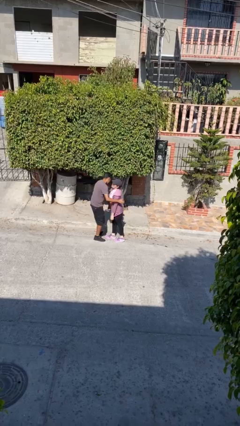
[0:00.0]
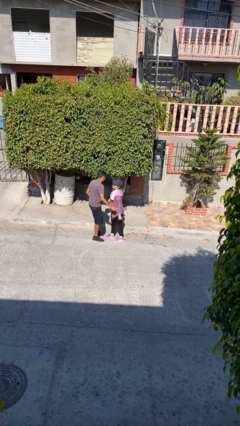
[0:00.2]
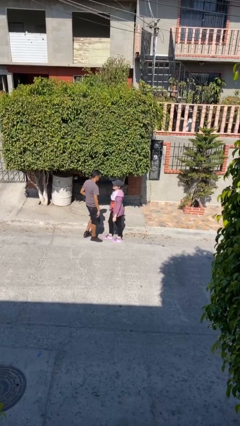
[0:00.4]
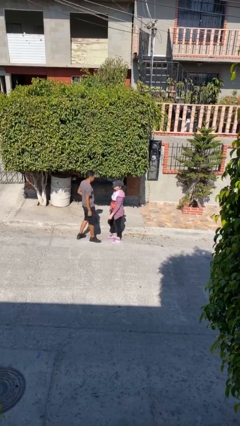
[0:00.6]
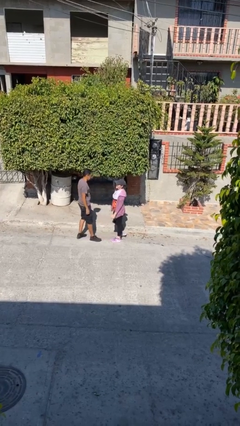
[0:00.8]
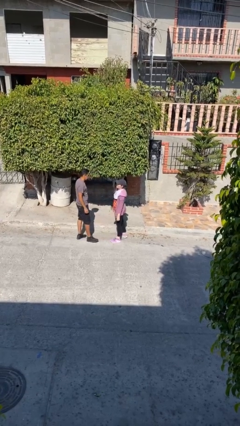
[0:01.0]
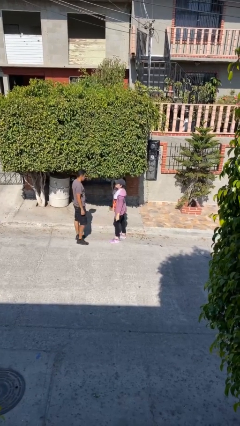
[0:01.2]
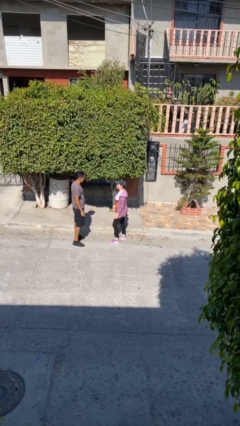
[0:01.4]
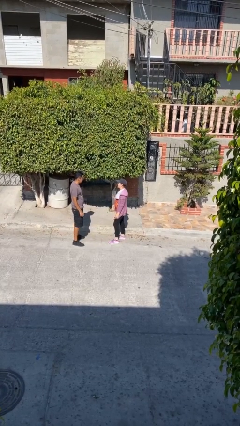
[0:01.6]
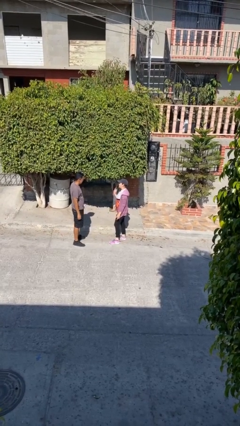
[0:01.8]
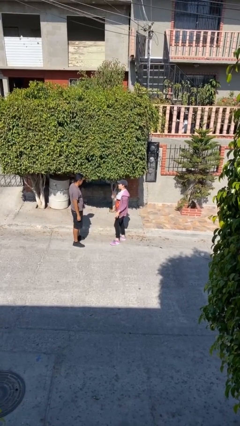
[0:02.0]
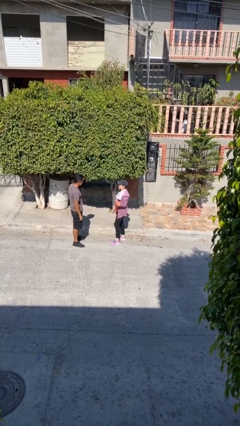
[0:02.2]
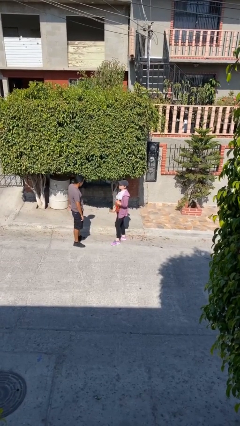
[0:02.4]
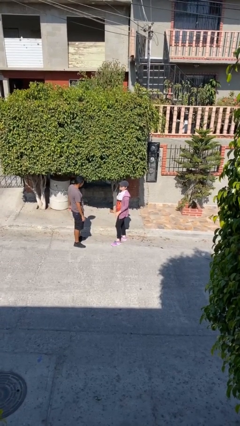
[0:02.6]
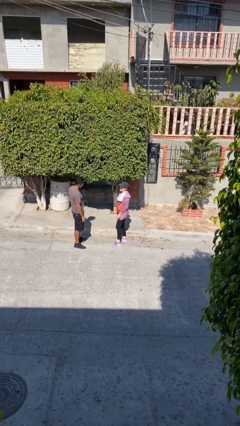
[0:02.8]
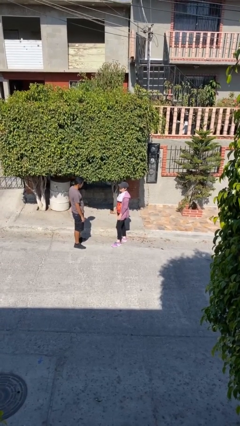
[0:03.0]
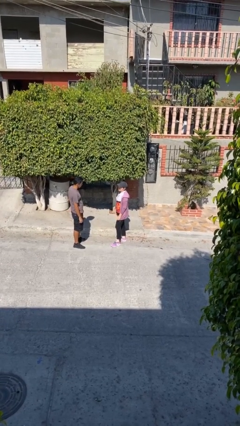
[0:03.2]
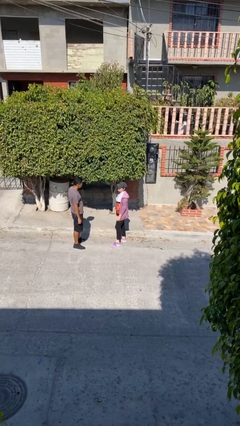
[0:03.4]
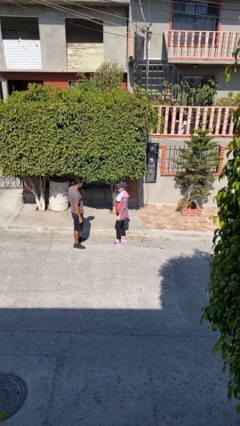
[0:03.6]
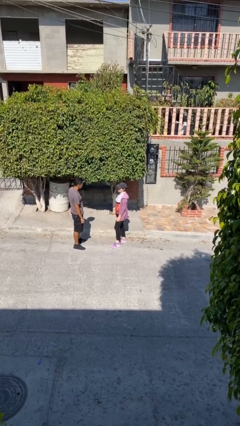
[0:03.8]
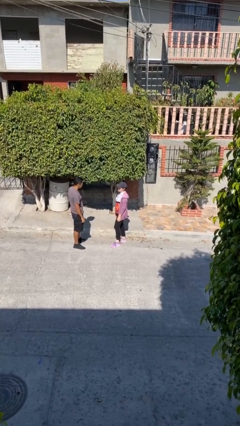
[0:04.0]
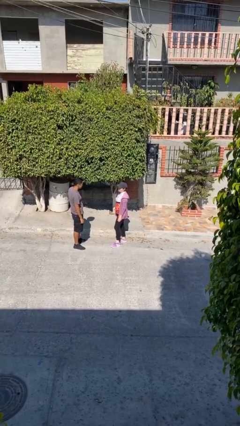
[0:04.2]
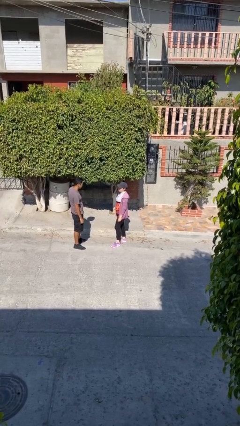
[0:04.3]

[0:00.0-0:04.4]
person talks to person

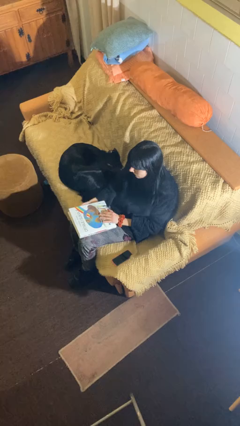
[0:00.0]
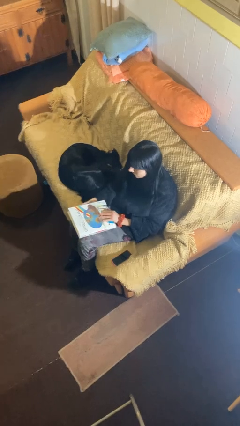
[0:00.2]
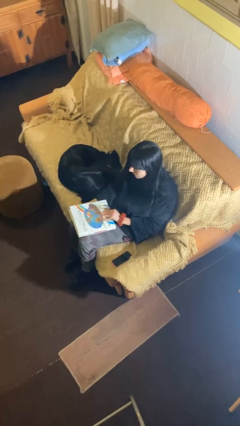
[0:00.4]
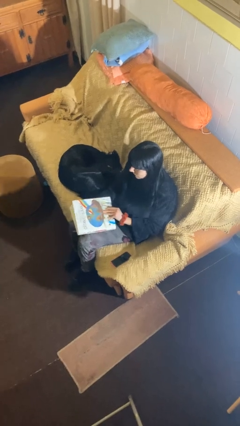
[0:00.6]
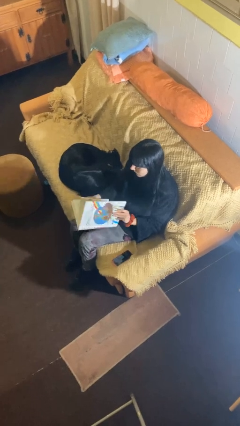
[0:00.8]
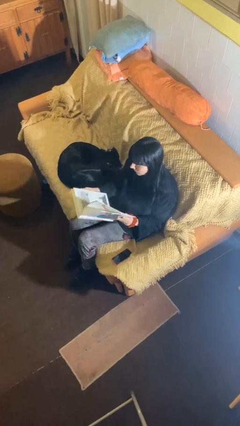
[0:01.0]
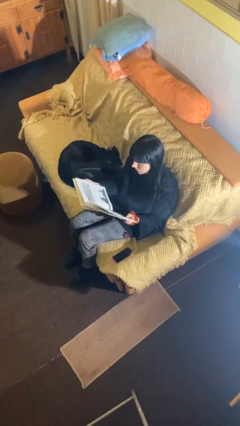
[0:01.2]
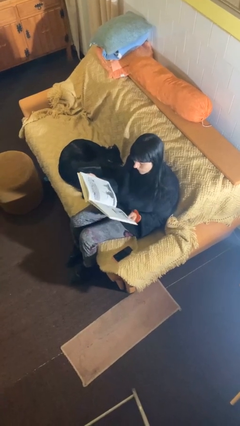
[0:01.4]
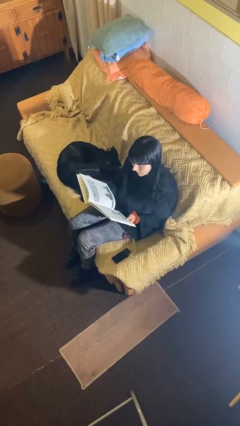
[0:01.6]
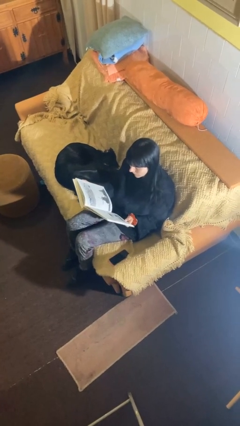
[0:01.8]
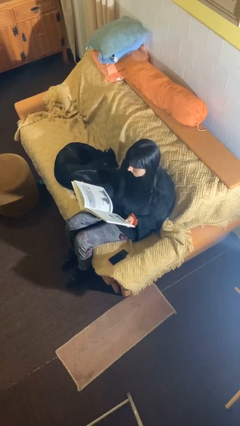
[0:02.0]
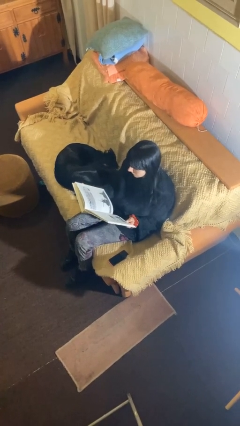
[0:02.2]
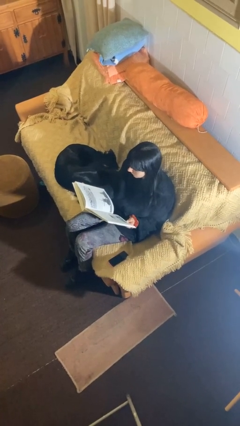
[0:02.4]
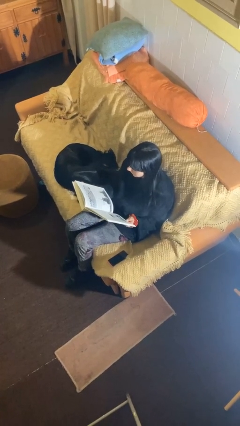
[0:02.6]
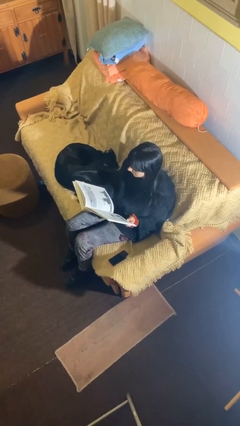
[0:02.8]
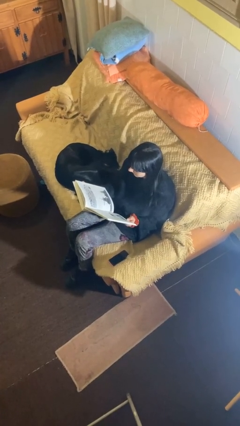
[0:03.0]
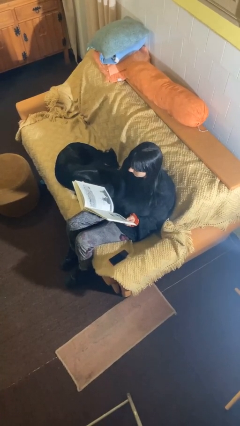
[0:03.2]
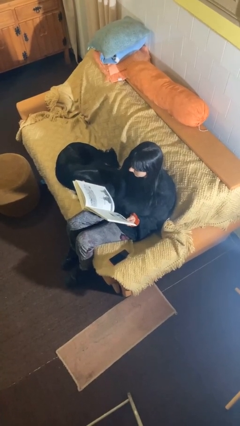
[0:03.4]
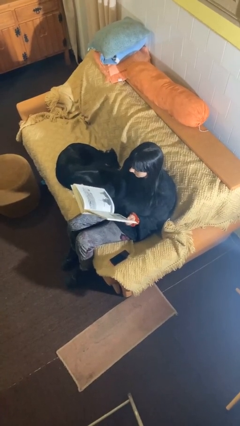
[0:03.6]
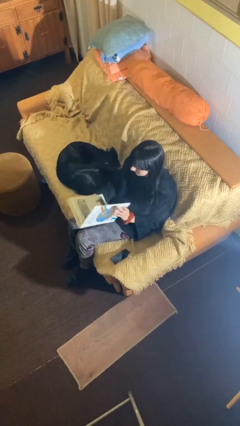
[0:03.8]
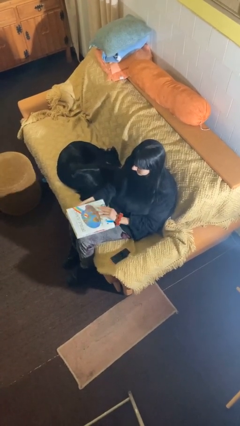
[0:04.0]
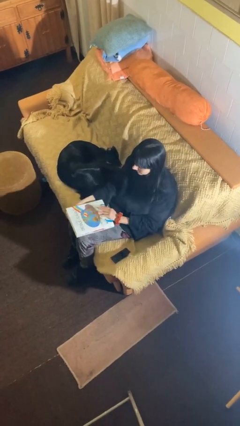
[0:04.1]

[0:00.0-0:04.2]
person reads document

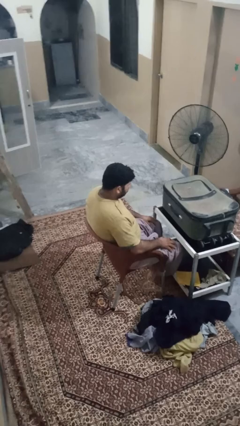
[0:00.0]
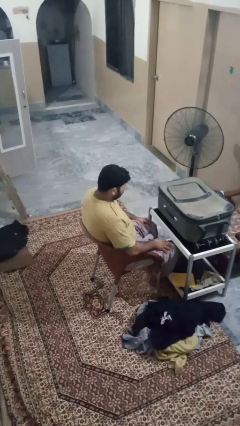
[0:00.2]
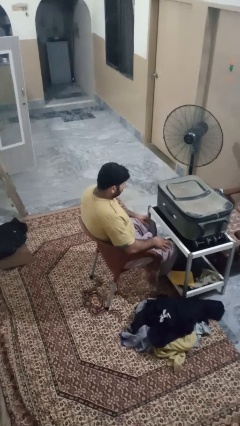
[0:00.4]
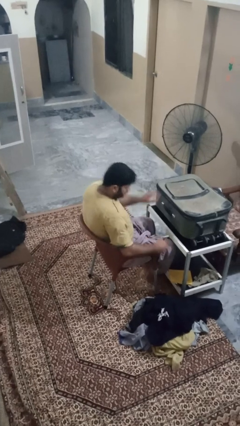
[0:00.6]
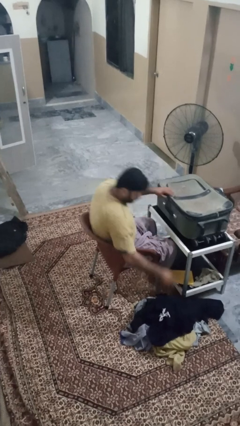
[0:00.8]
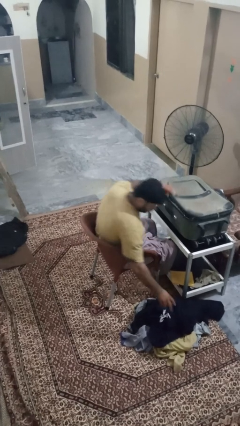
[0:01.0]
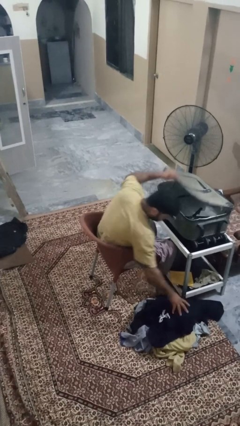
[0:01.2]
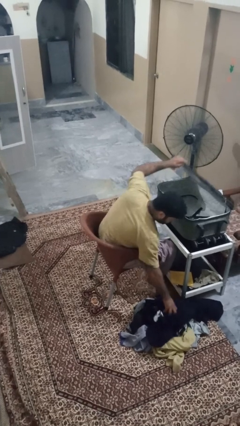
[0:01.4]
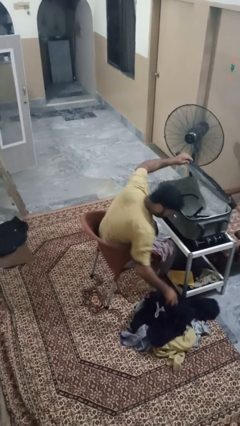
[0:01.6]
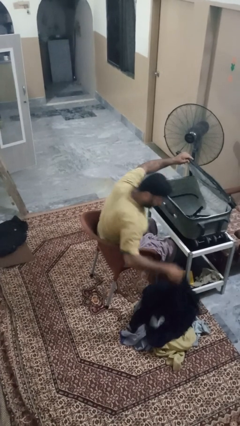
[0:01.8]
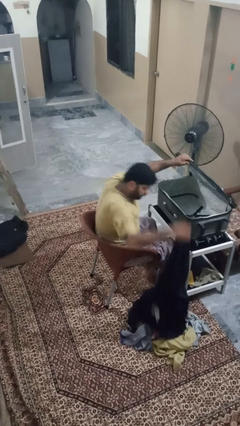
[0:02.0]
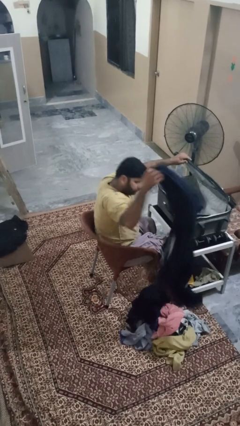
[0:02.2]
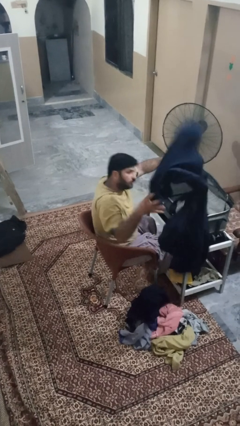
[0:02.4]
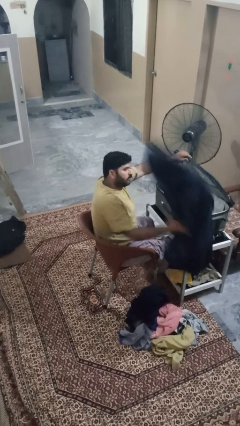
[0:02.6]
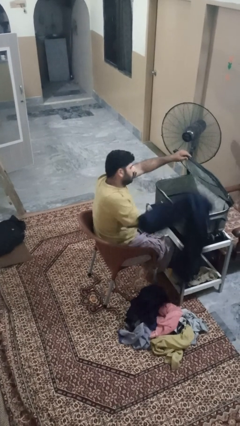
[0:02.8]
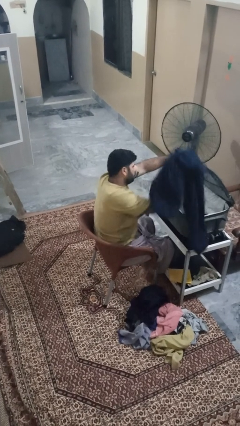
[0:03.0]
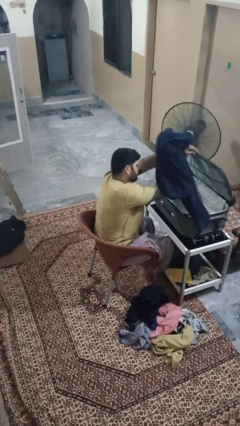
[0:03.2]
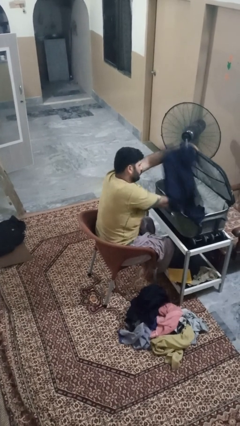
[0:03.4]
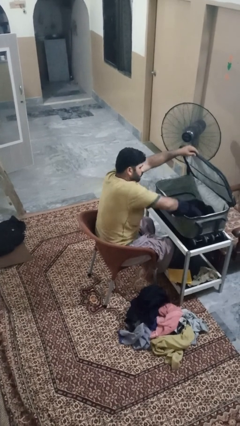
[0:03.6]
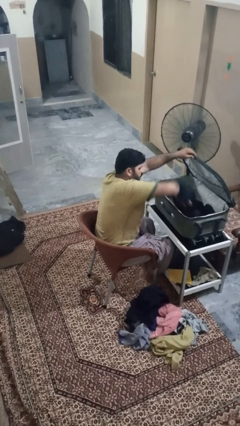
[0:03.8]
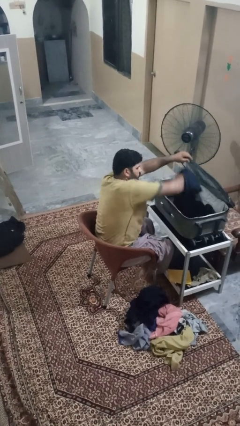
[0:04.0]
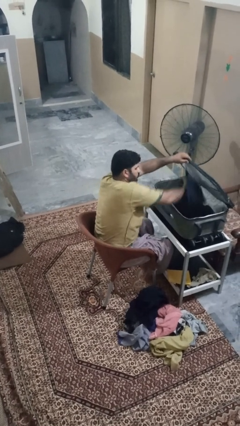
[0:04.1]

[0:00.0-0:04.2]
person loads clothes into suitcase

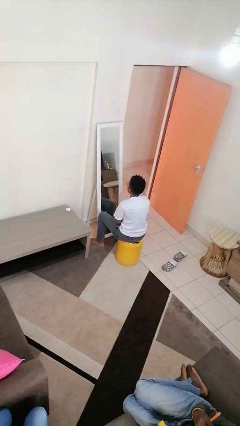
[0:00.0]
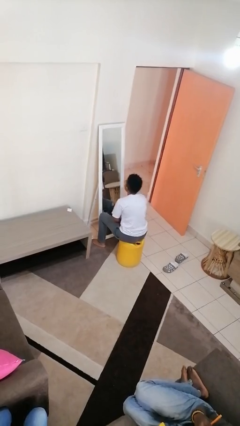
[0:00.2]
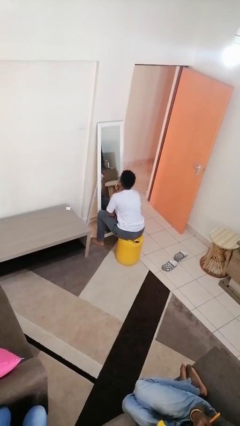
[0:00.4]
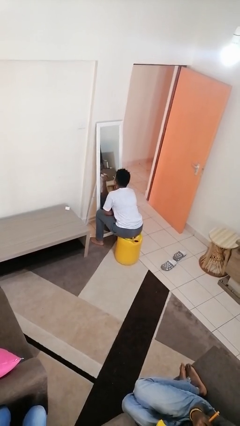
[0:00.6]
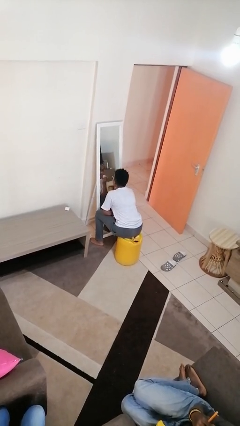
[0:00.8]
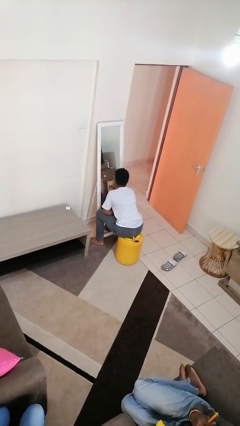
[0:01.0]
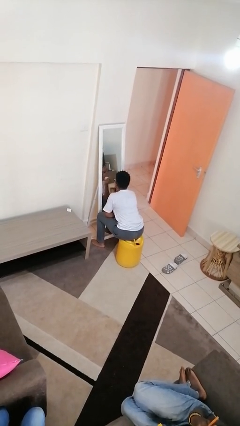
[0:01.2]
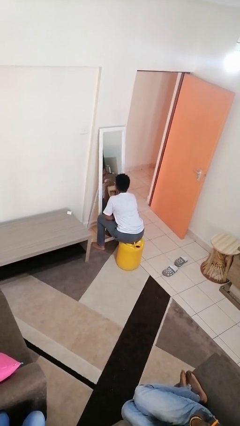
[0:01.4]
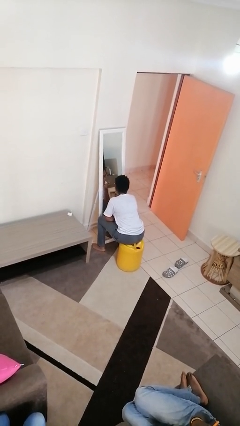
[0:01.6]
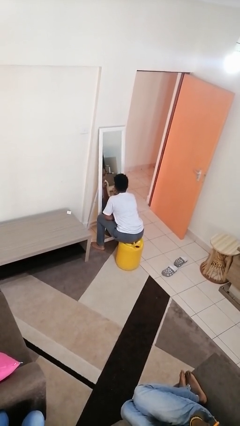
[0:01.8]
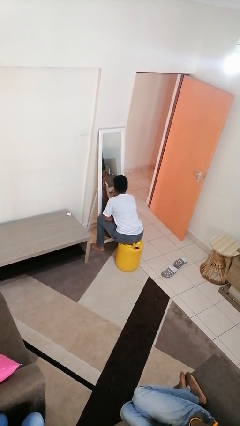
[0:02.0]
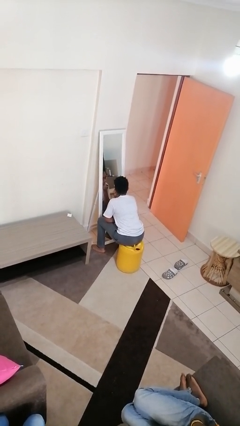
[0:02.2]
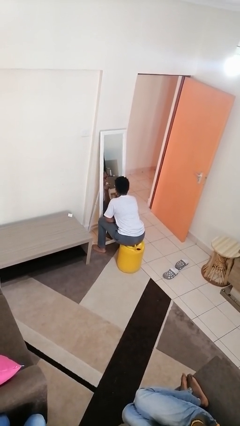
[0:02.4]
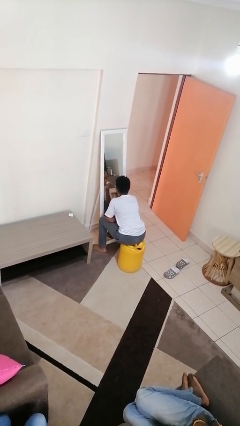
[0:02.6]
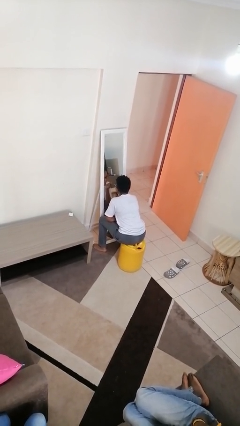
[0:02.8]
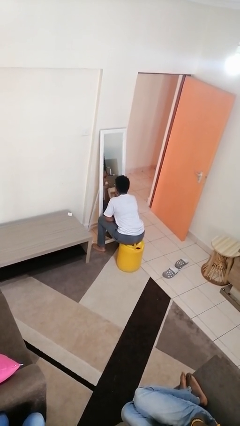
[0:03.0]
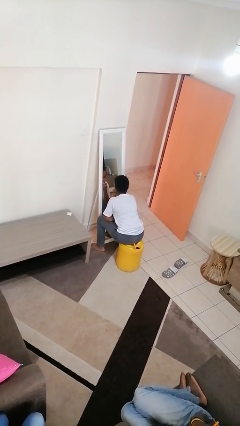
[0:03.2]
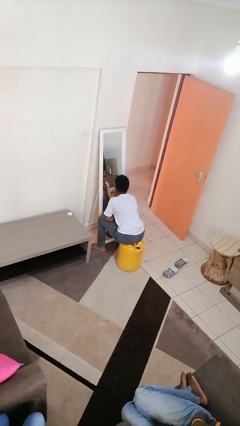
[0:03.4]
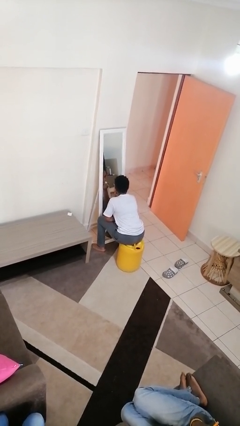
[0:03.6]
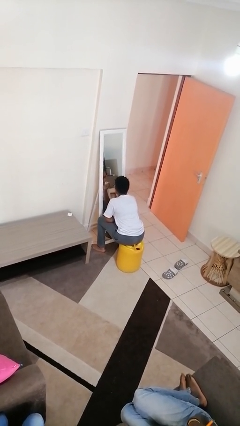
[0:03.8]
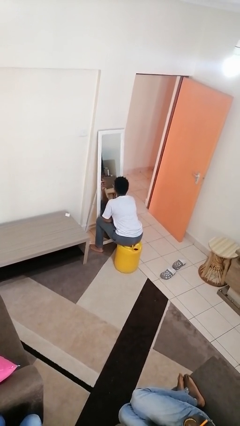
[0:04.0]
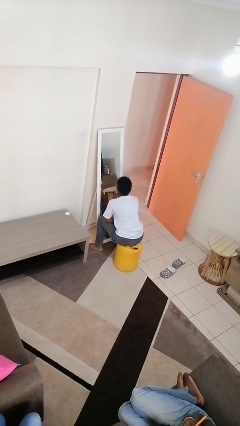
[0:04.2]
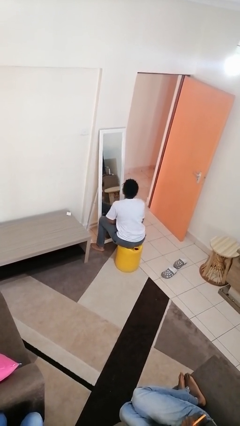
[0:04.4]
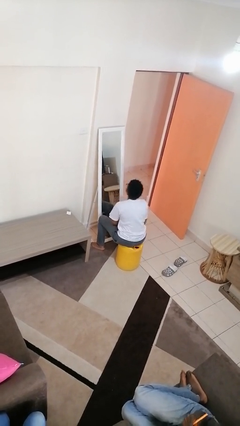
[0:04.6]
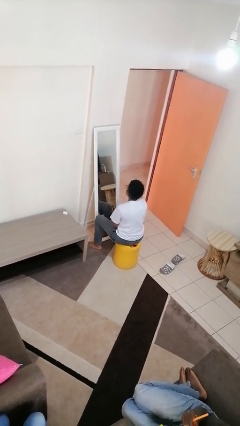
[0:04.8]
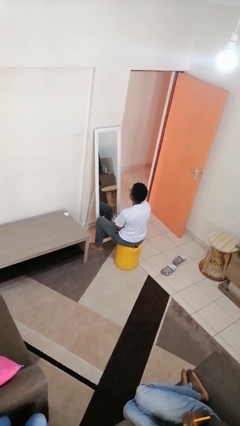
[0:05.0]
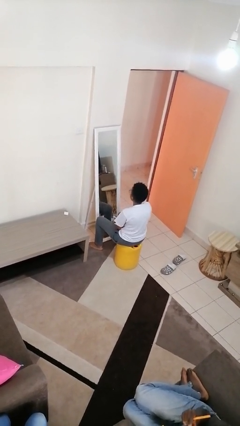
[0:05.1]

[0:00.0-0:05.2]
person applies lip makeup
